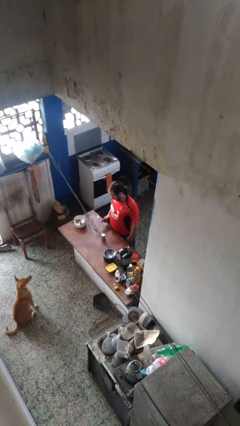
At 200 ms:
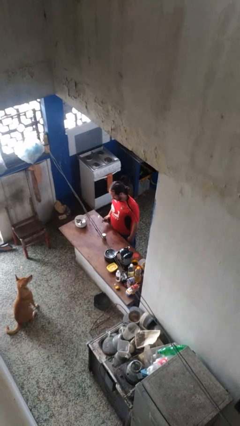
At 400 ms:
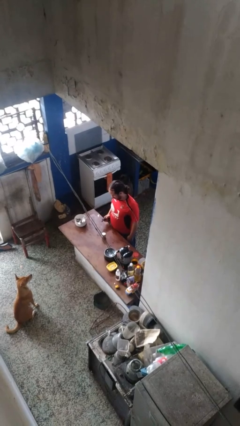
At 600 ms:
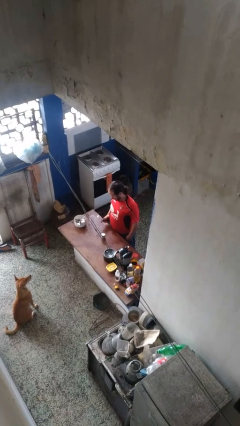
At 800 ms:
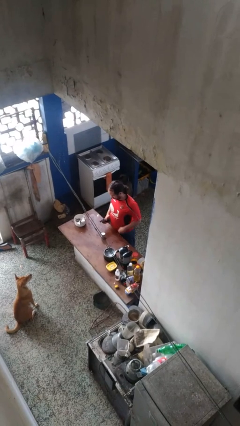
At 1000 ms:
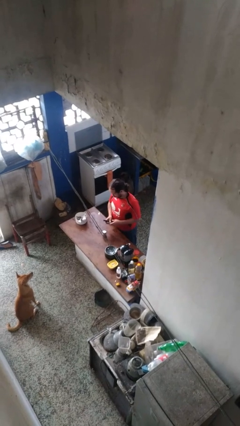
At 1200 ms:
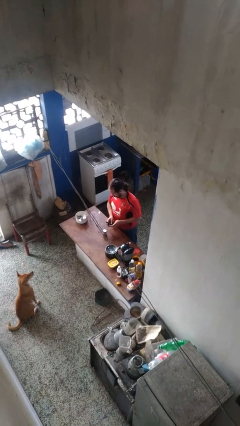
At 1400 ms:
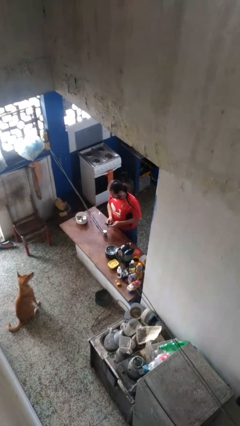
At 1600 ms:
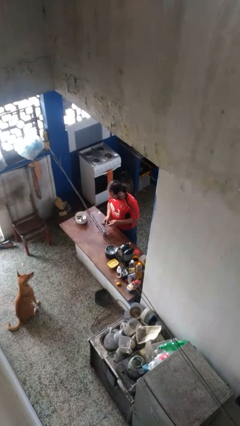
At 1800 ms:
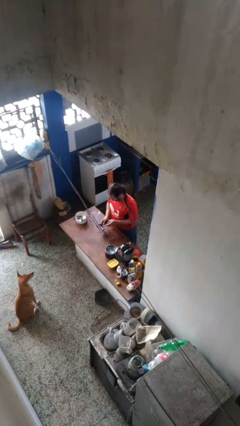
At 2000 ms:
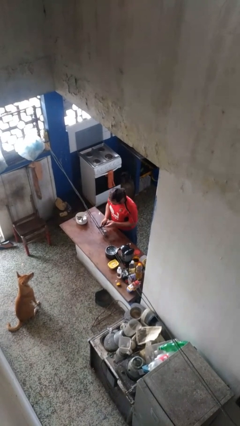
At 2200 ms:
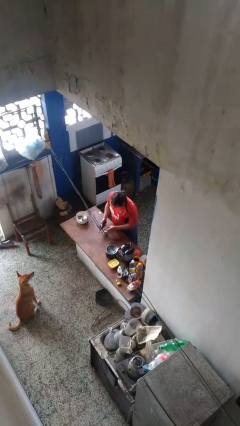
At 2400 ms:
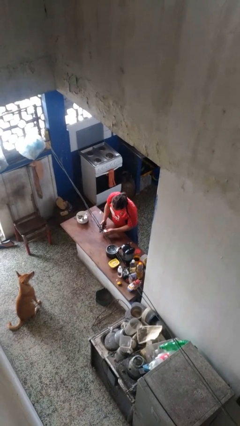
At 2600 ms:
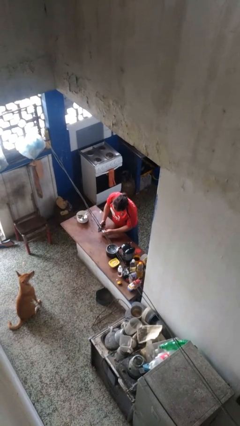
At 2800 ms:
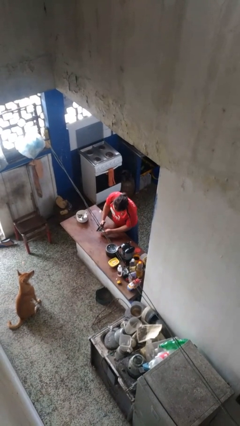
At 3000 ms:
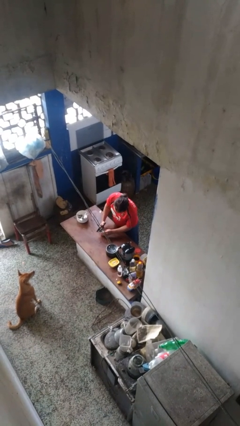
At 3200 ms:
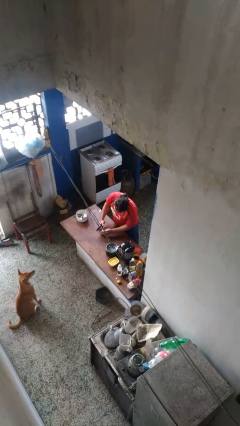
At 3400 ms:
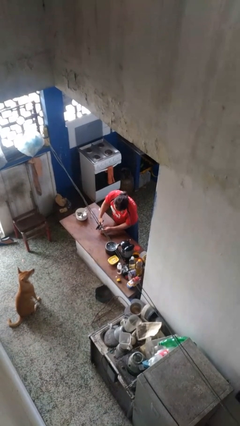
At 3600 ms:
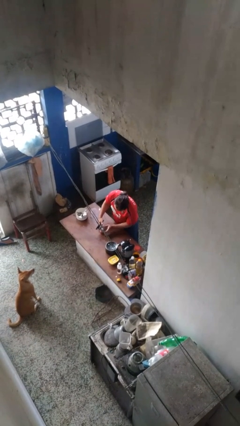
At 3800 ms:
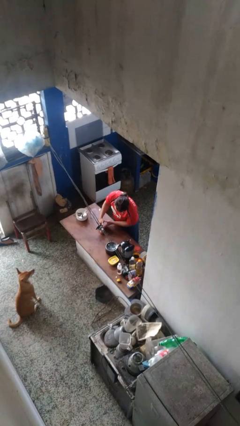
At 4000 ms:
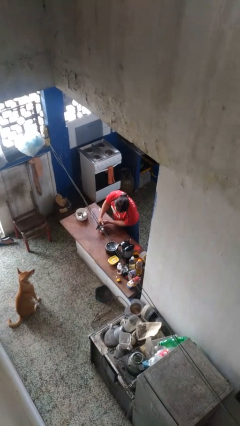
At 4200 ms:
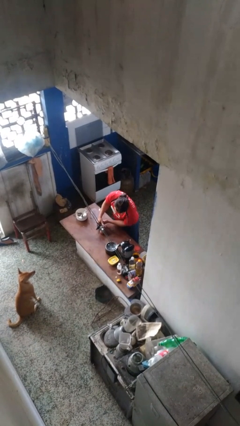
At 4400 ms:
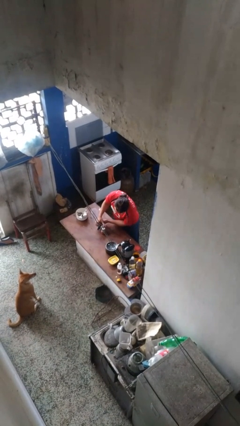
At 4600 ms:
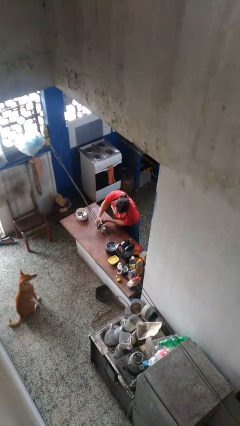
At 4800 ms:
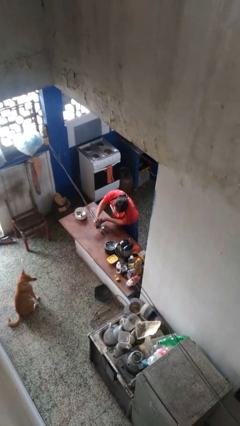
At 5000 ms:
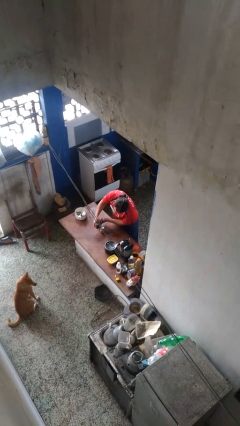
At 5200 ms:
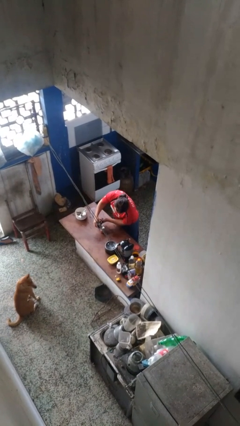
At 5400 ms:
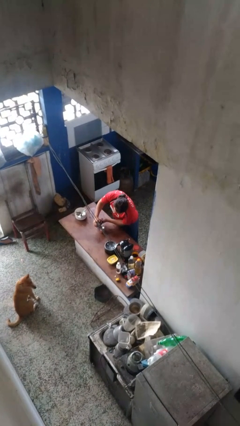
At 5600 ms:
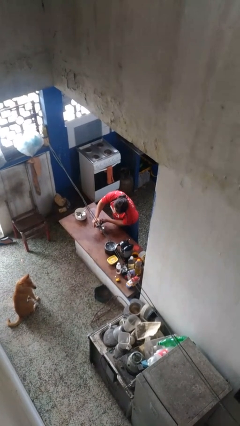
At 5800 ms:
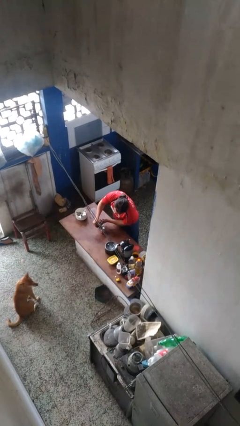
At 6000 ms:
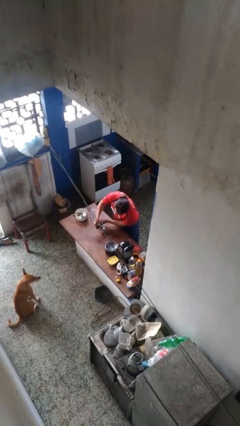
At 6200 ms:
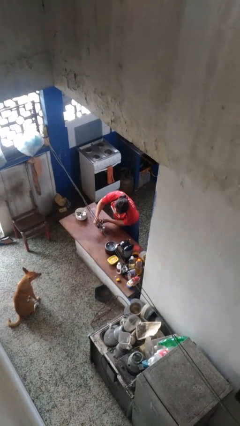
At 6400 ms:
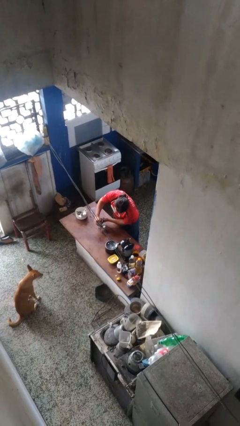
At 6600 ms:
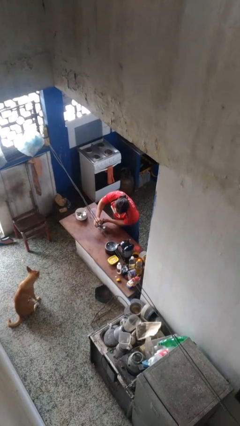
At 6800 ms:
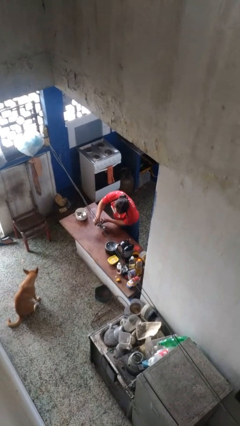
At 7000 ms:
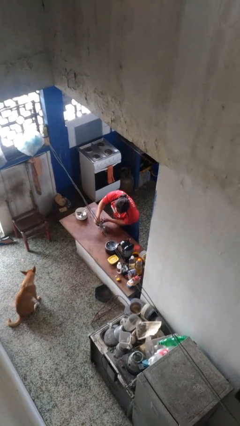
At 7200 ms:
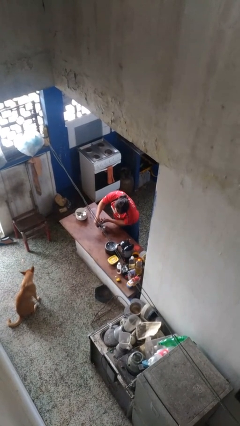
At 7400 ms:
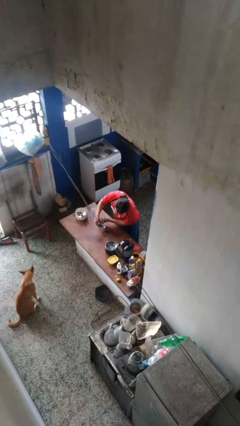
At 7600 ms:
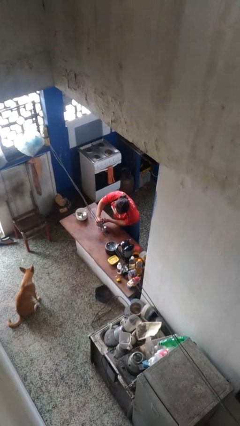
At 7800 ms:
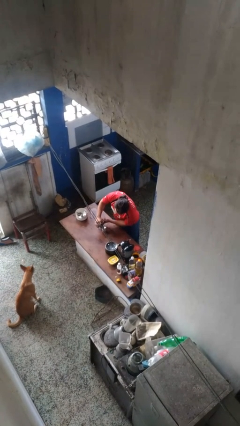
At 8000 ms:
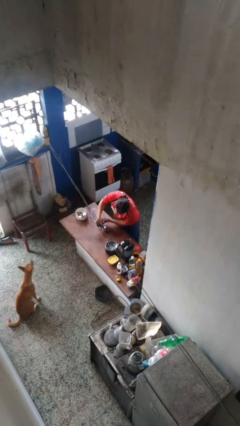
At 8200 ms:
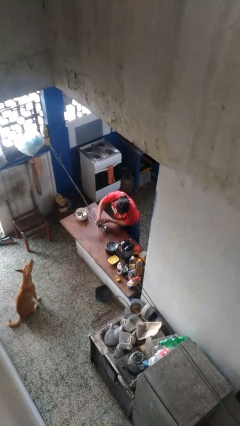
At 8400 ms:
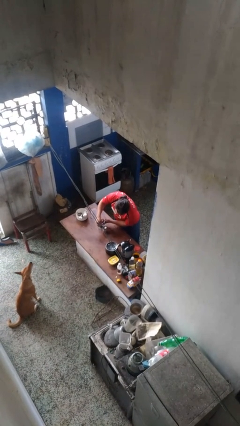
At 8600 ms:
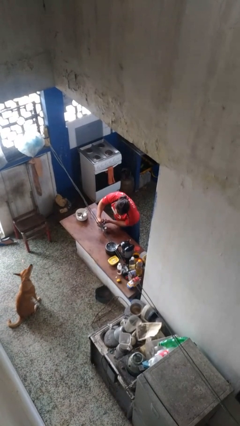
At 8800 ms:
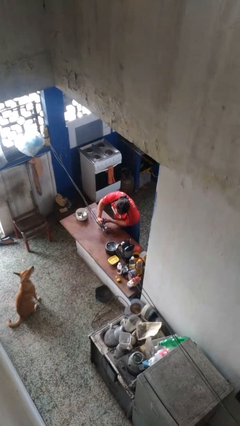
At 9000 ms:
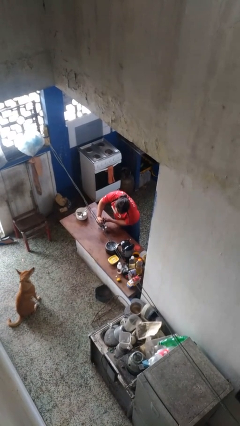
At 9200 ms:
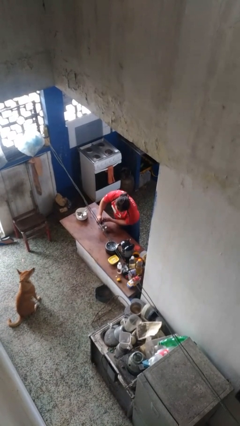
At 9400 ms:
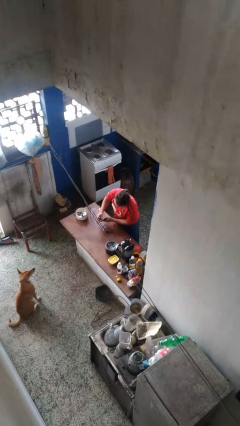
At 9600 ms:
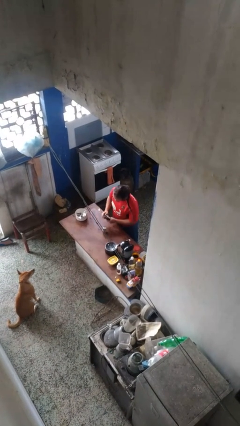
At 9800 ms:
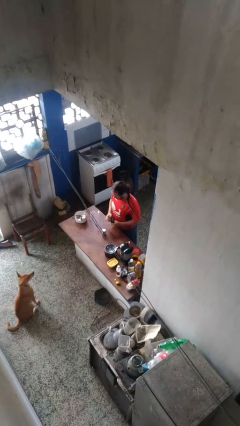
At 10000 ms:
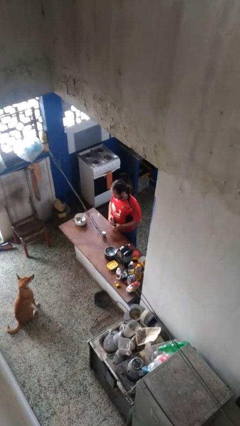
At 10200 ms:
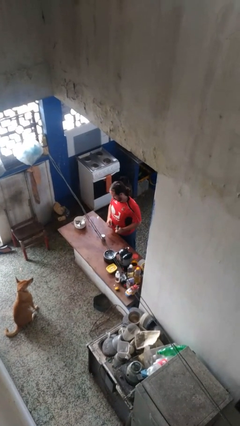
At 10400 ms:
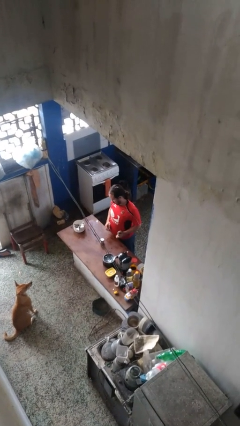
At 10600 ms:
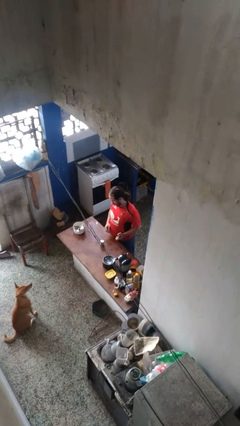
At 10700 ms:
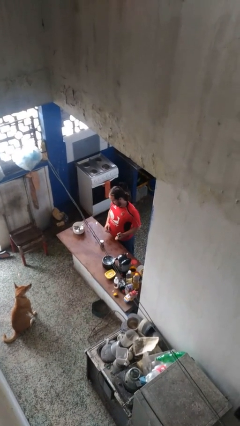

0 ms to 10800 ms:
person opens can with can opener

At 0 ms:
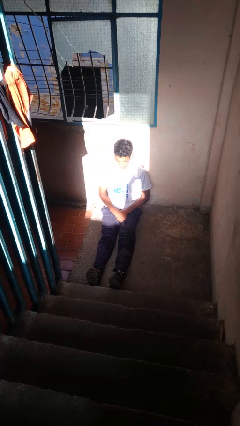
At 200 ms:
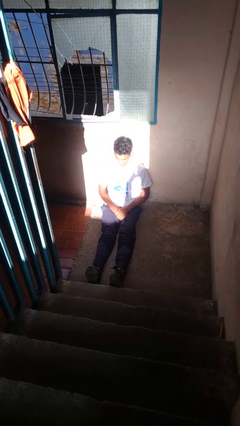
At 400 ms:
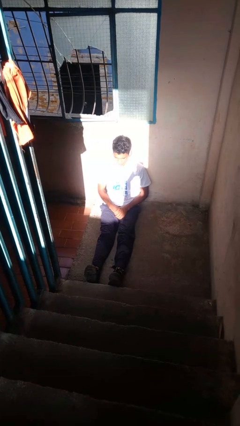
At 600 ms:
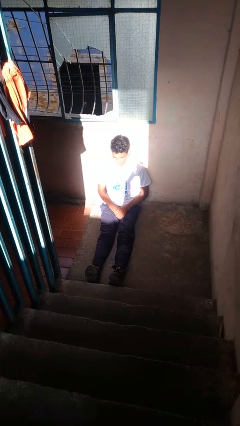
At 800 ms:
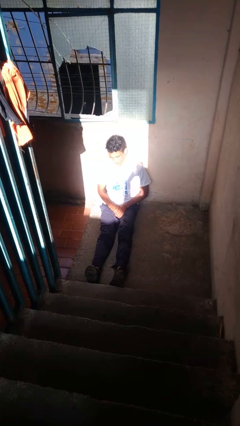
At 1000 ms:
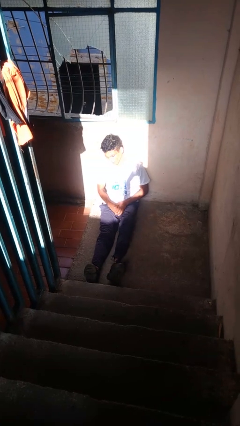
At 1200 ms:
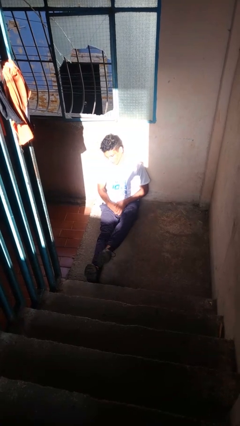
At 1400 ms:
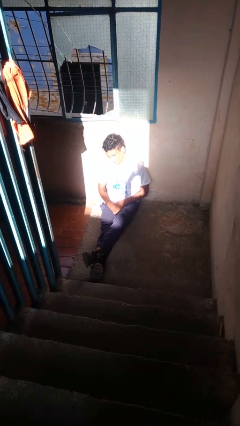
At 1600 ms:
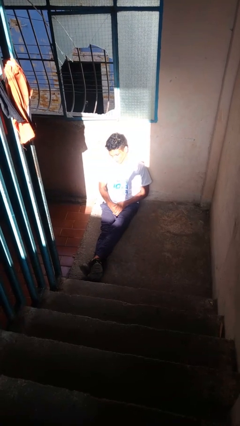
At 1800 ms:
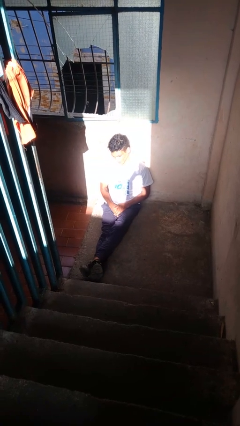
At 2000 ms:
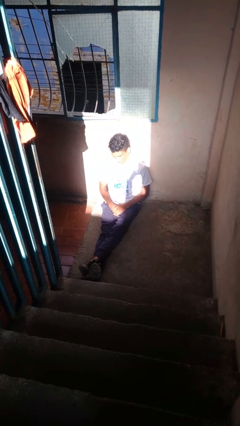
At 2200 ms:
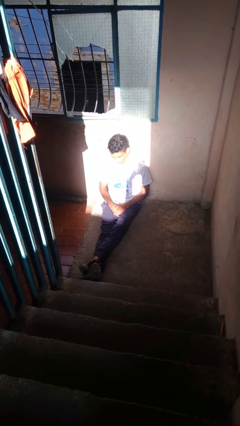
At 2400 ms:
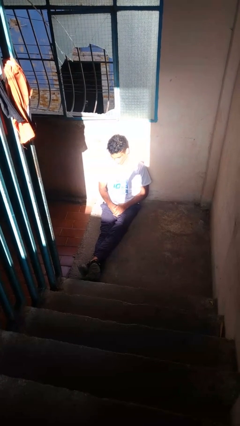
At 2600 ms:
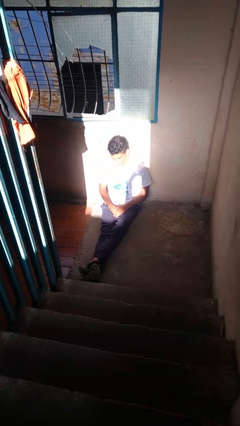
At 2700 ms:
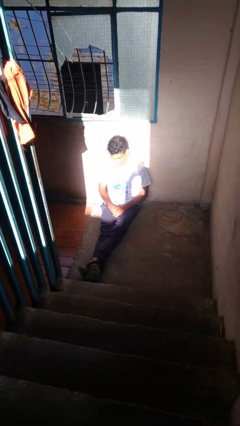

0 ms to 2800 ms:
person crosses legs

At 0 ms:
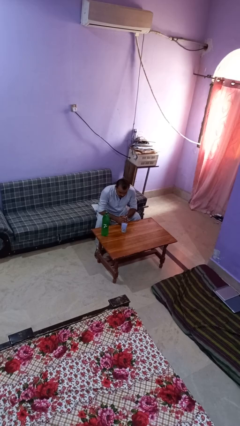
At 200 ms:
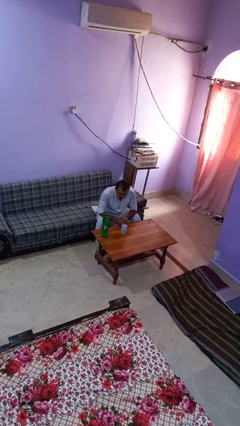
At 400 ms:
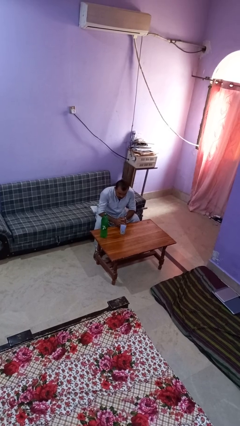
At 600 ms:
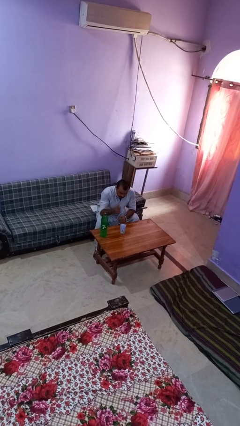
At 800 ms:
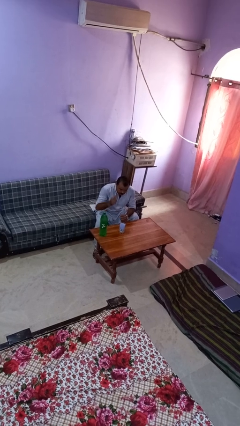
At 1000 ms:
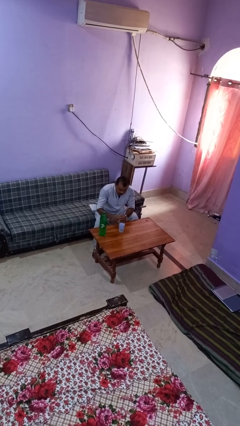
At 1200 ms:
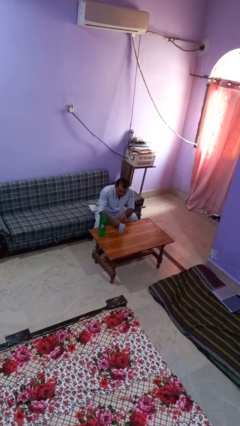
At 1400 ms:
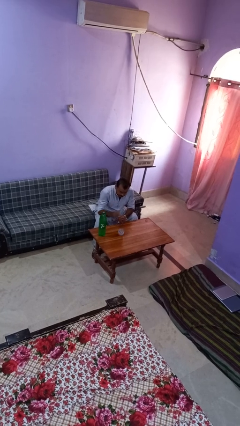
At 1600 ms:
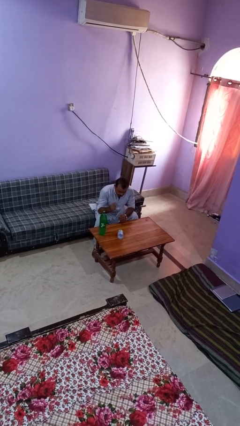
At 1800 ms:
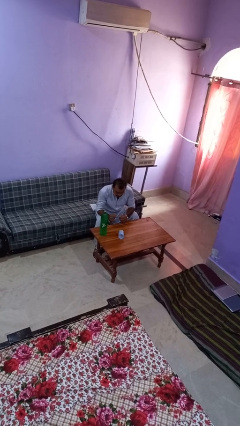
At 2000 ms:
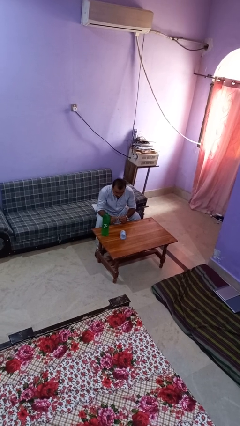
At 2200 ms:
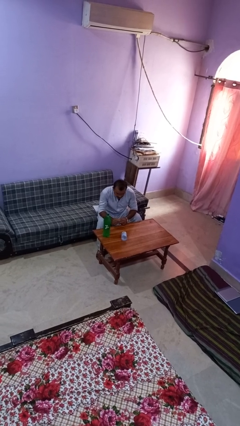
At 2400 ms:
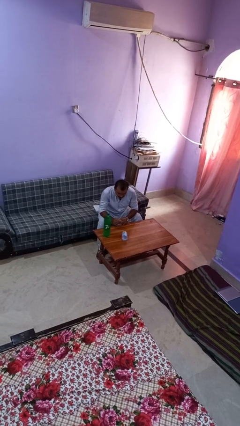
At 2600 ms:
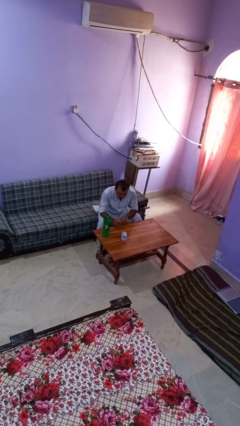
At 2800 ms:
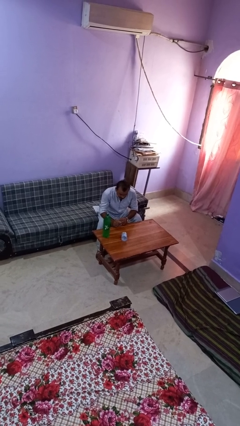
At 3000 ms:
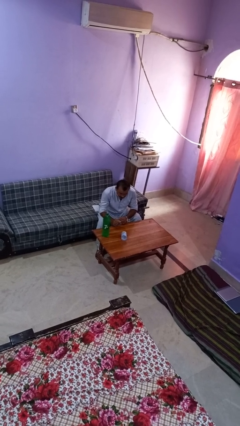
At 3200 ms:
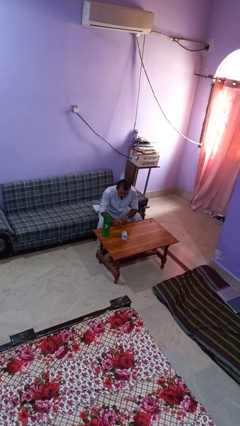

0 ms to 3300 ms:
person knocks over glass

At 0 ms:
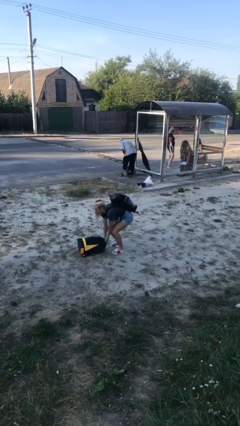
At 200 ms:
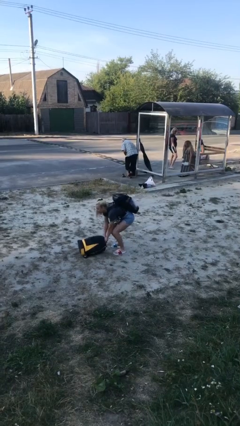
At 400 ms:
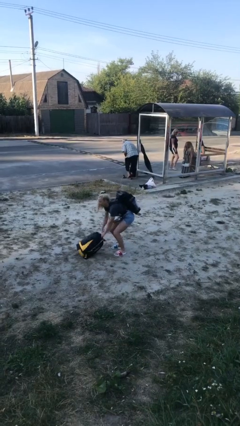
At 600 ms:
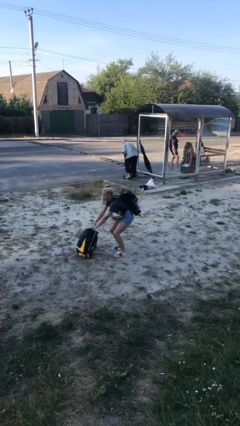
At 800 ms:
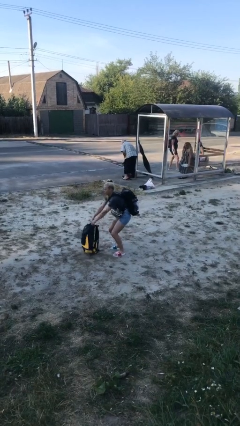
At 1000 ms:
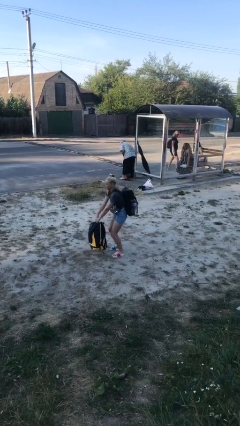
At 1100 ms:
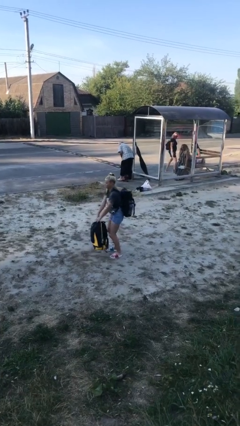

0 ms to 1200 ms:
person picks up object from floor

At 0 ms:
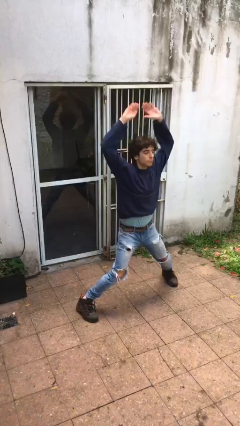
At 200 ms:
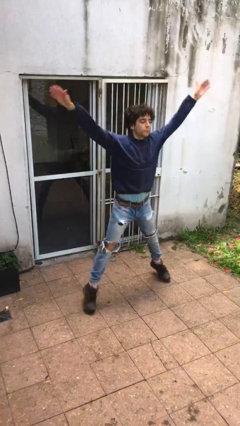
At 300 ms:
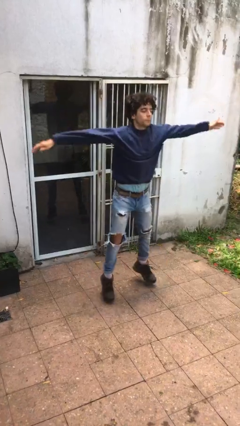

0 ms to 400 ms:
person exercises with jumping jacks
